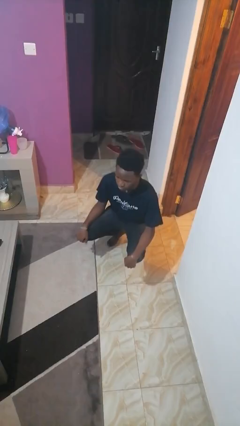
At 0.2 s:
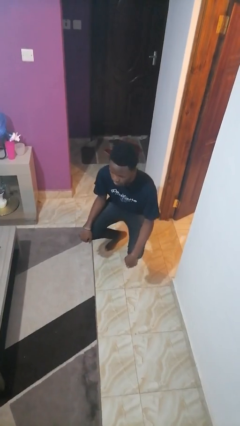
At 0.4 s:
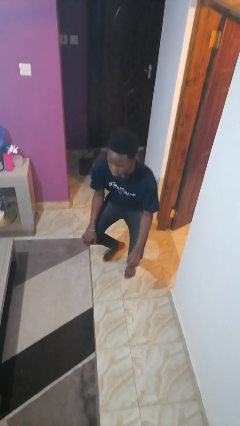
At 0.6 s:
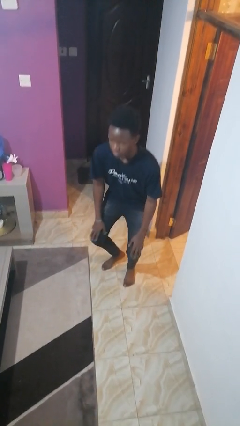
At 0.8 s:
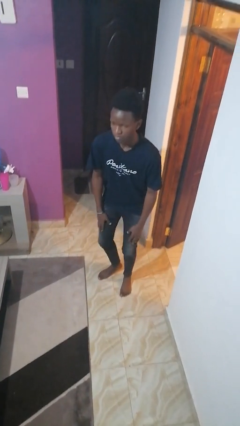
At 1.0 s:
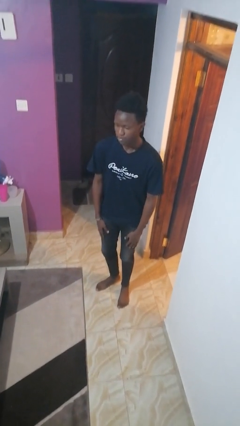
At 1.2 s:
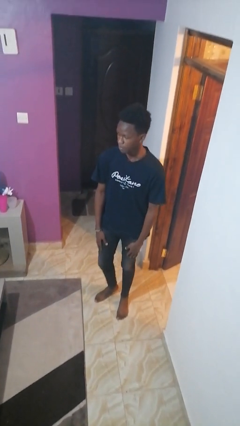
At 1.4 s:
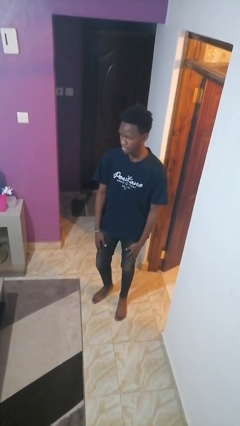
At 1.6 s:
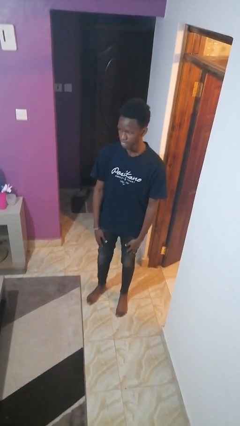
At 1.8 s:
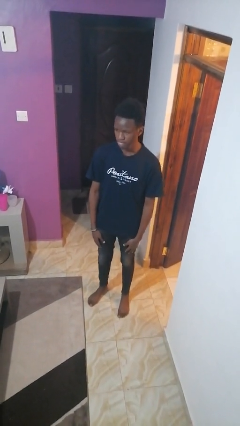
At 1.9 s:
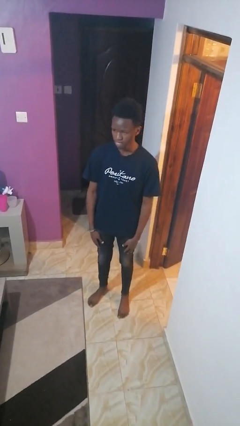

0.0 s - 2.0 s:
person stands up

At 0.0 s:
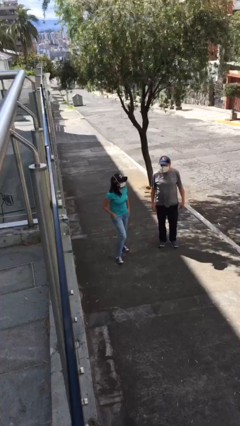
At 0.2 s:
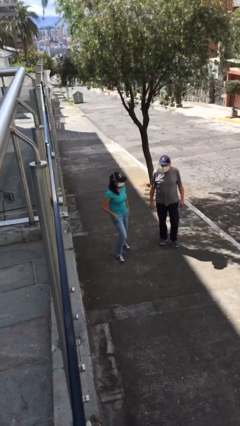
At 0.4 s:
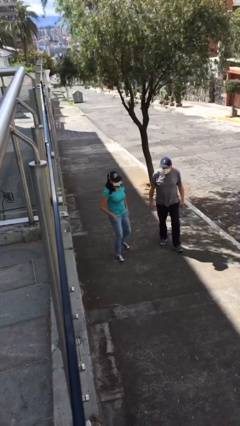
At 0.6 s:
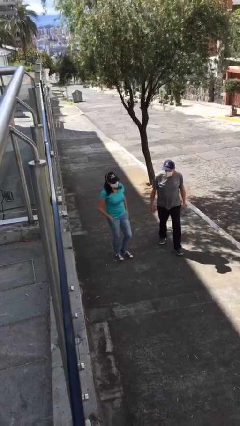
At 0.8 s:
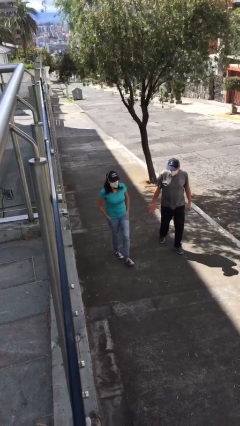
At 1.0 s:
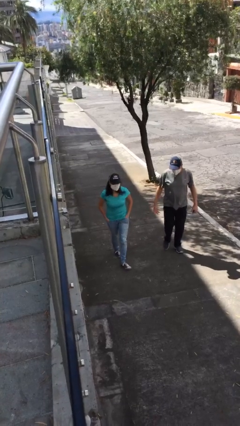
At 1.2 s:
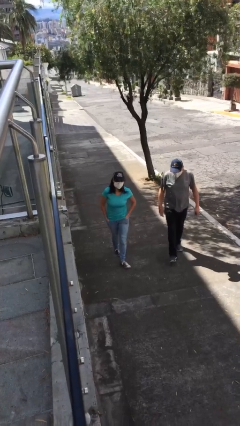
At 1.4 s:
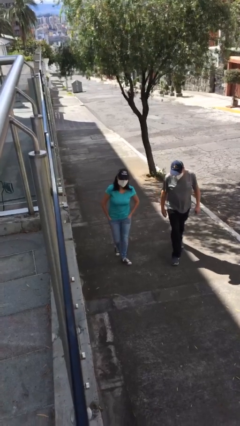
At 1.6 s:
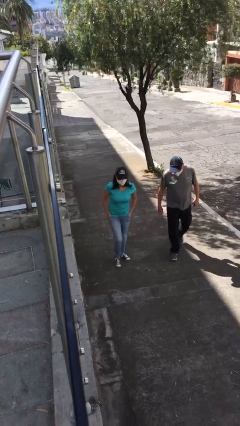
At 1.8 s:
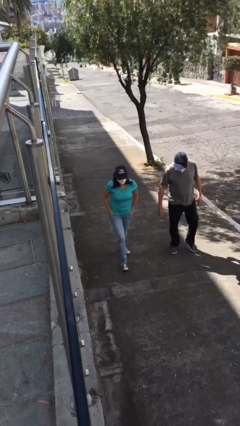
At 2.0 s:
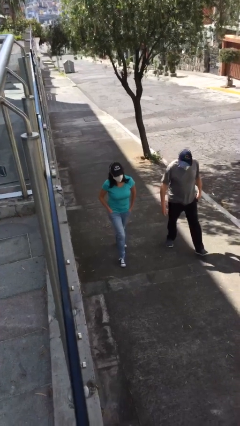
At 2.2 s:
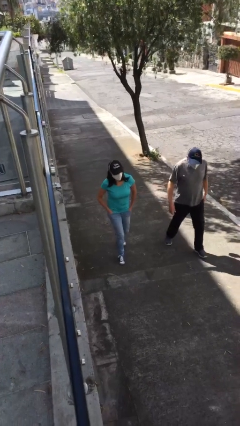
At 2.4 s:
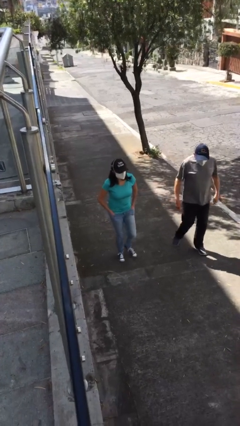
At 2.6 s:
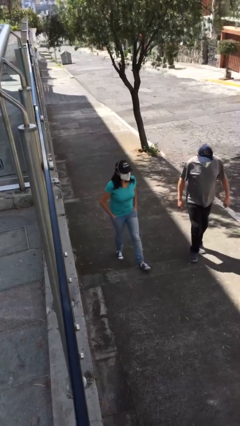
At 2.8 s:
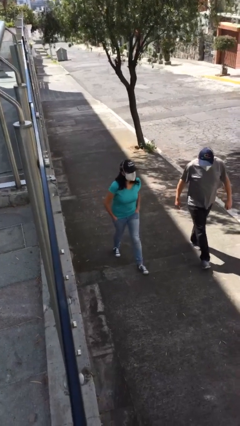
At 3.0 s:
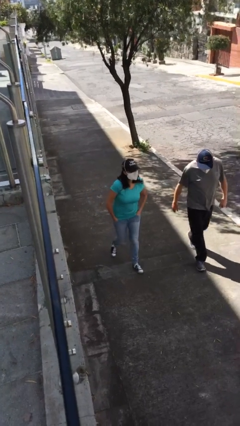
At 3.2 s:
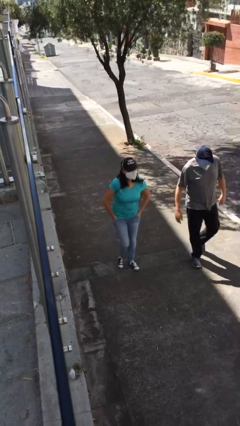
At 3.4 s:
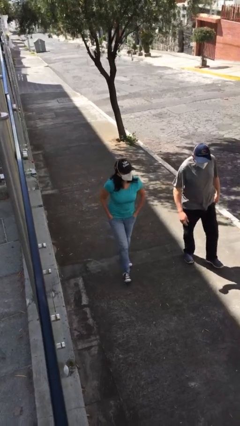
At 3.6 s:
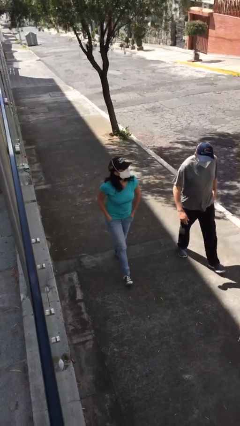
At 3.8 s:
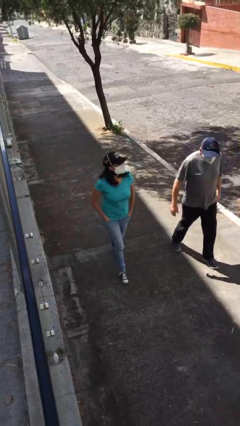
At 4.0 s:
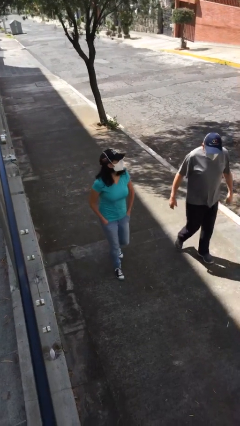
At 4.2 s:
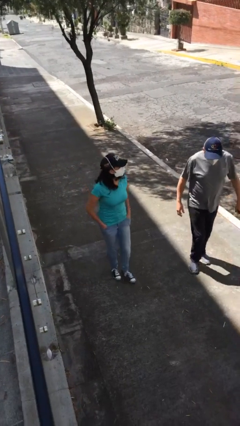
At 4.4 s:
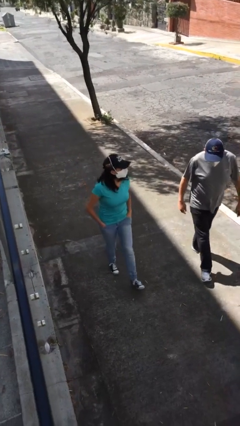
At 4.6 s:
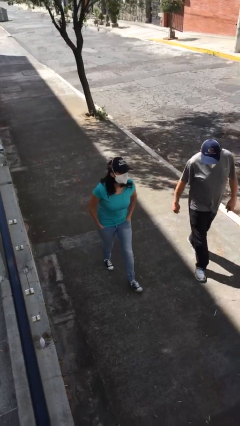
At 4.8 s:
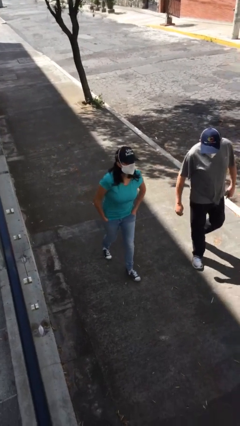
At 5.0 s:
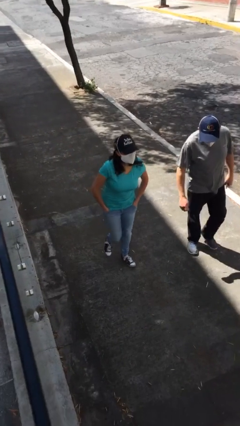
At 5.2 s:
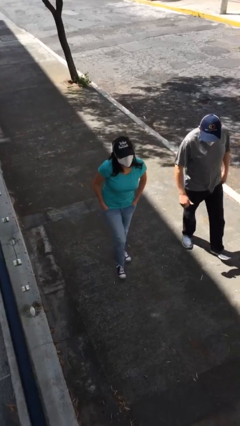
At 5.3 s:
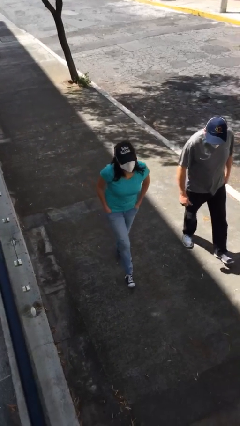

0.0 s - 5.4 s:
person talks to person

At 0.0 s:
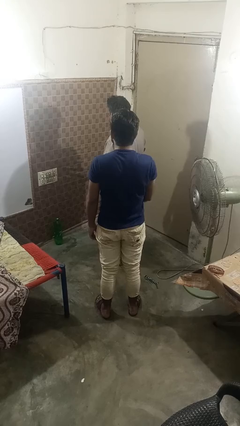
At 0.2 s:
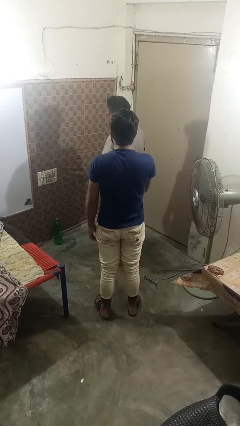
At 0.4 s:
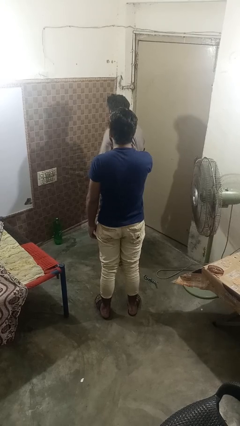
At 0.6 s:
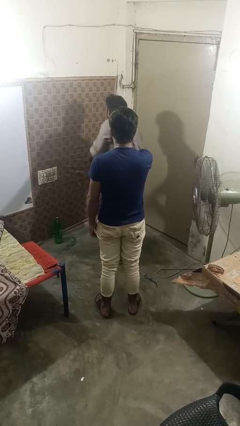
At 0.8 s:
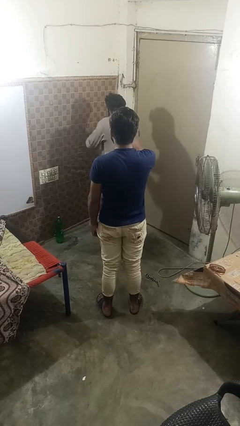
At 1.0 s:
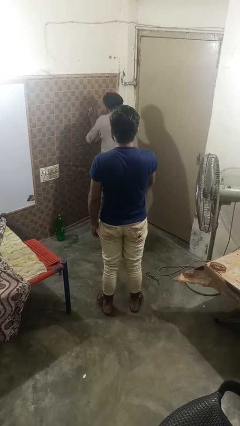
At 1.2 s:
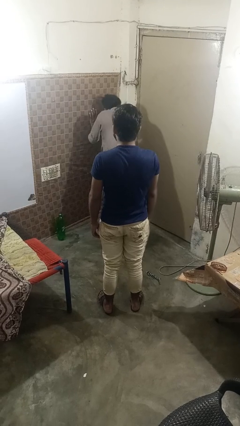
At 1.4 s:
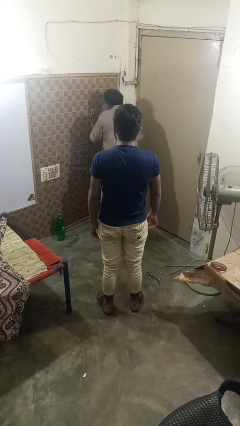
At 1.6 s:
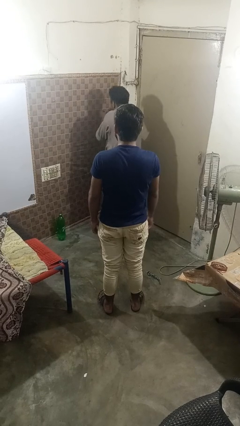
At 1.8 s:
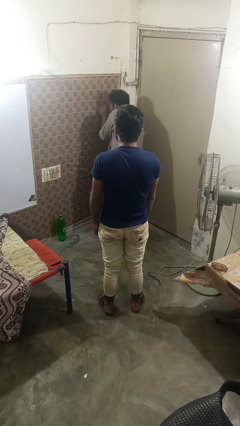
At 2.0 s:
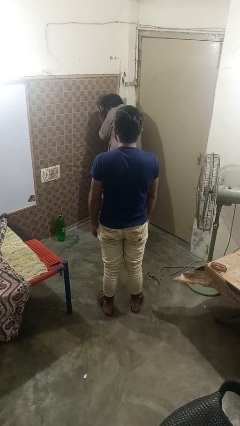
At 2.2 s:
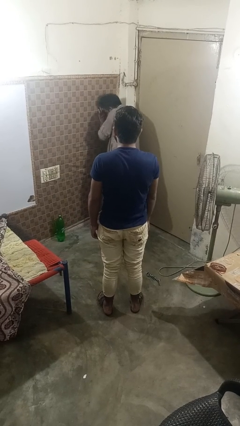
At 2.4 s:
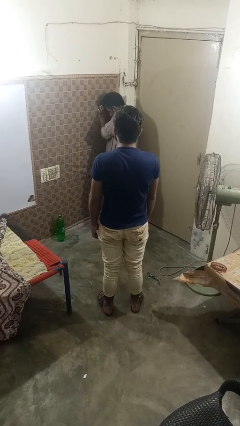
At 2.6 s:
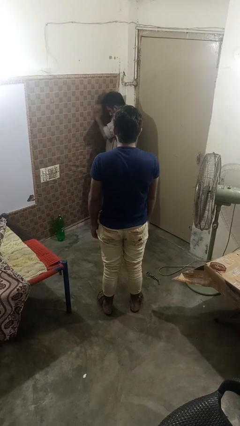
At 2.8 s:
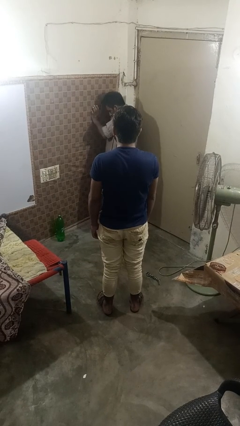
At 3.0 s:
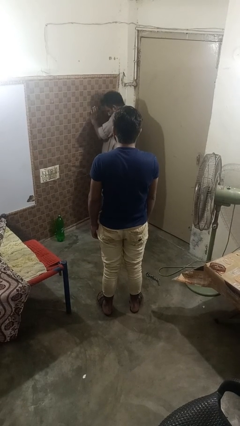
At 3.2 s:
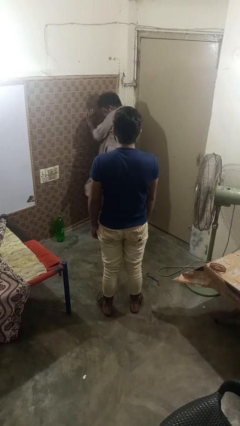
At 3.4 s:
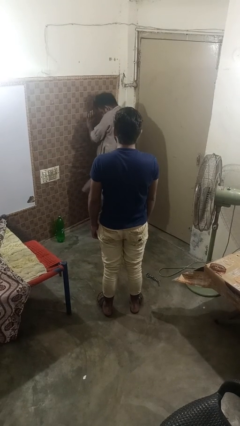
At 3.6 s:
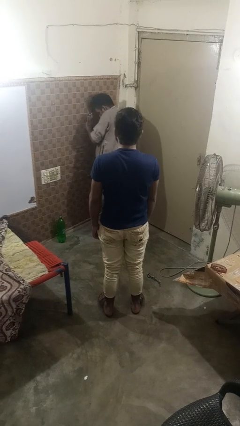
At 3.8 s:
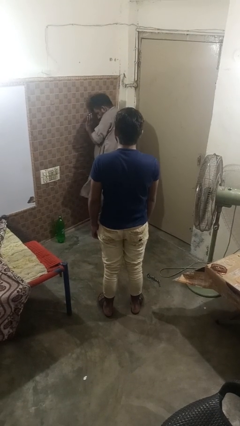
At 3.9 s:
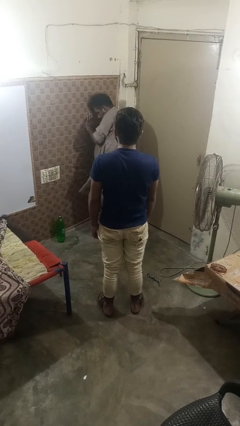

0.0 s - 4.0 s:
person shoves person

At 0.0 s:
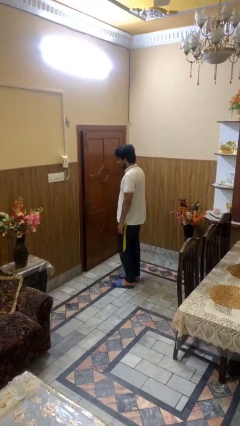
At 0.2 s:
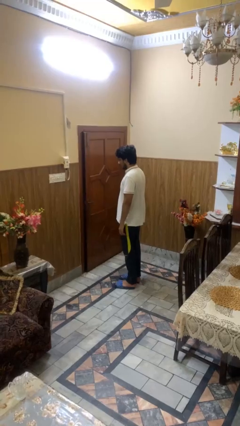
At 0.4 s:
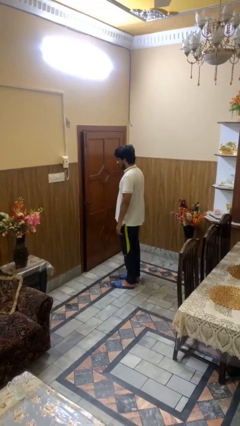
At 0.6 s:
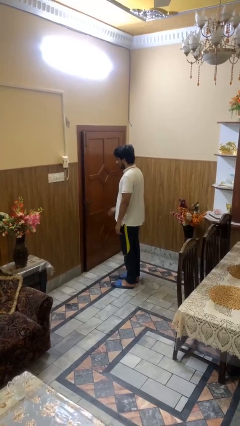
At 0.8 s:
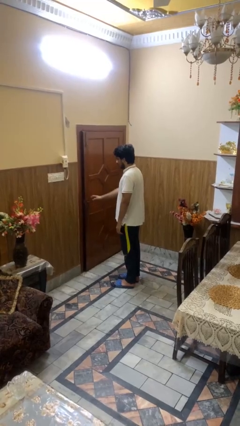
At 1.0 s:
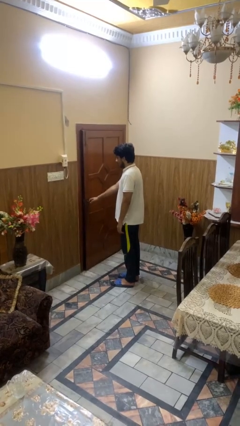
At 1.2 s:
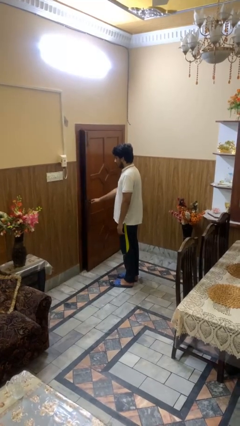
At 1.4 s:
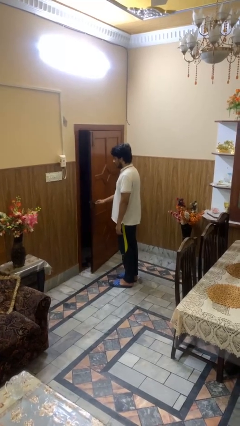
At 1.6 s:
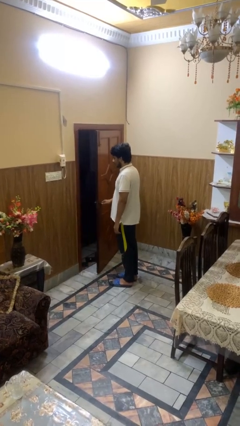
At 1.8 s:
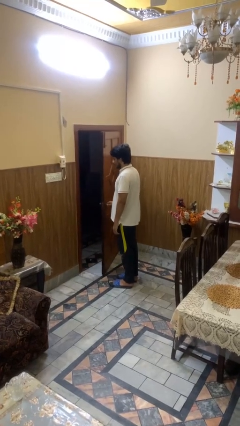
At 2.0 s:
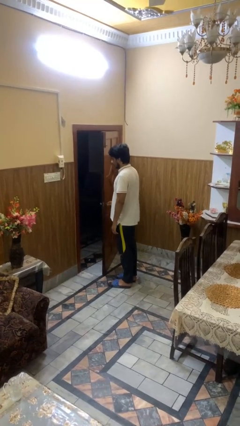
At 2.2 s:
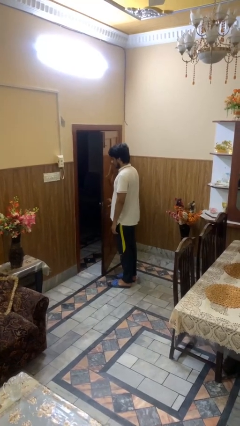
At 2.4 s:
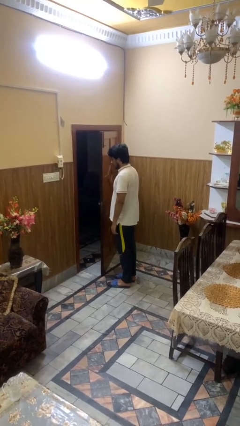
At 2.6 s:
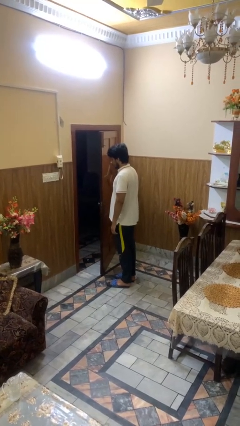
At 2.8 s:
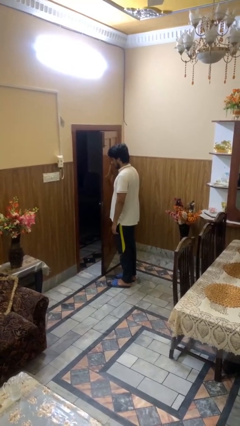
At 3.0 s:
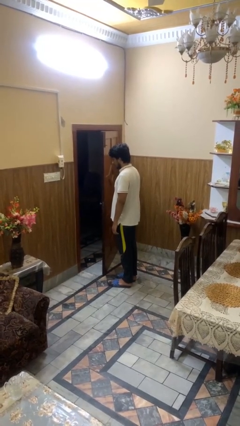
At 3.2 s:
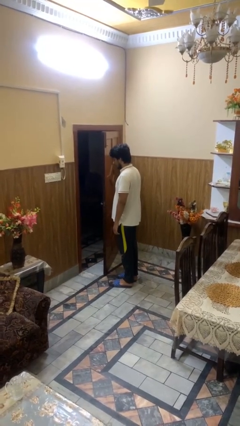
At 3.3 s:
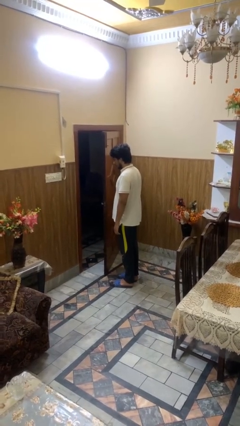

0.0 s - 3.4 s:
person opens facility door

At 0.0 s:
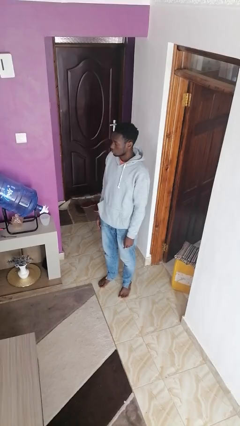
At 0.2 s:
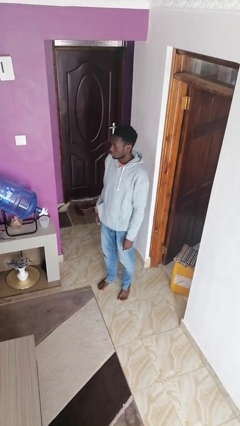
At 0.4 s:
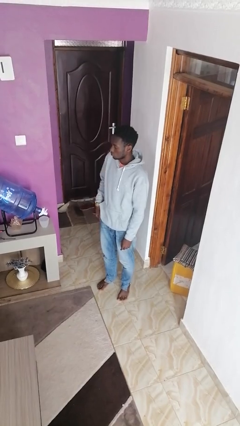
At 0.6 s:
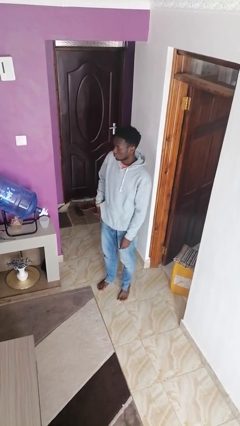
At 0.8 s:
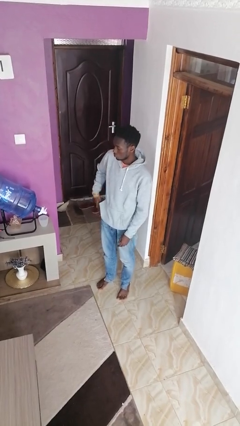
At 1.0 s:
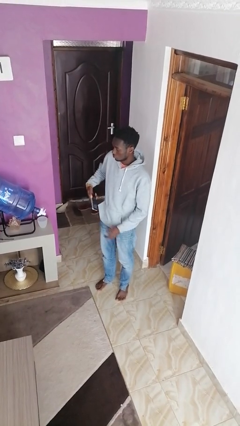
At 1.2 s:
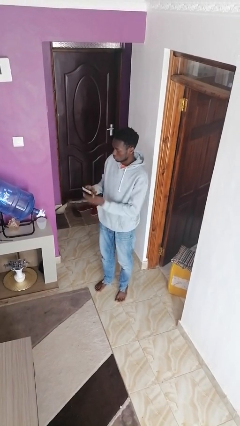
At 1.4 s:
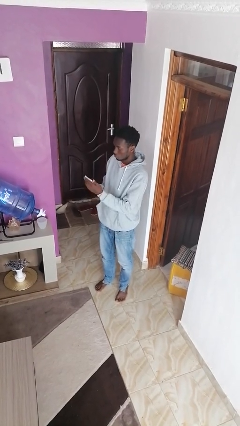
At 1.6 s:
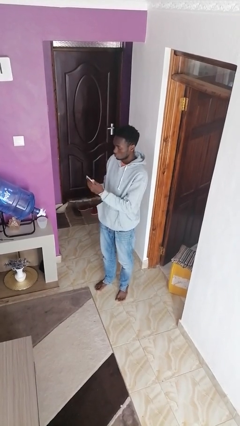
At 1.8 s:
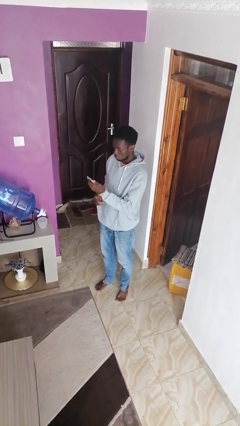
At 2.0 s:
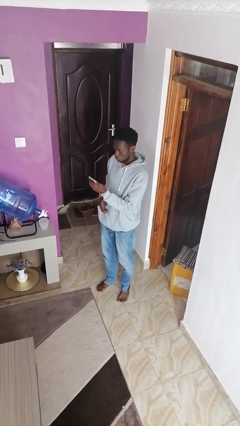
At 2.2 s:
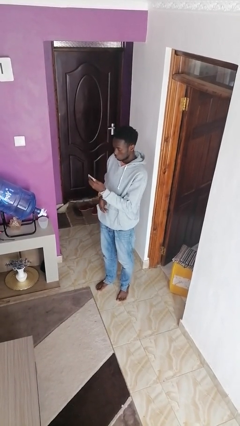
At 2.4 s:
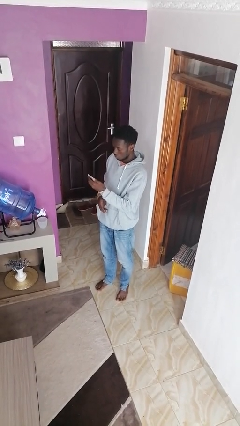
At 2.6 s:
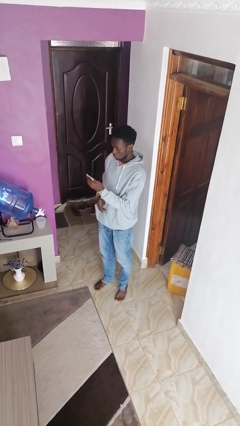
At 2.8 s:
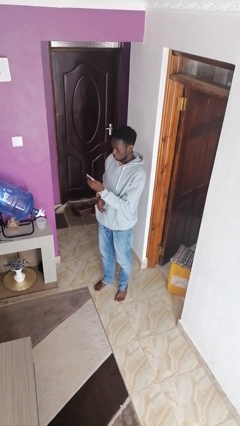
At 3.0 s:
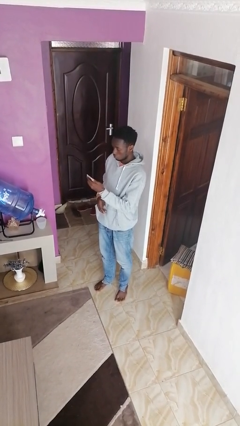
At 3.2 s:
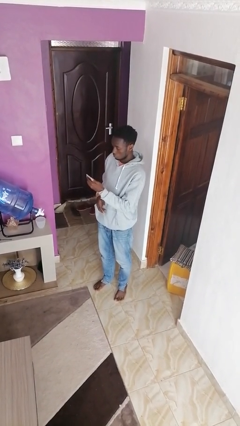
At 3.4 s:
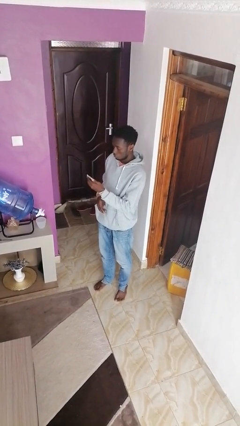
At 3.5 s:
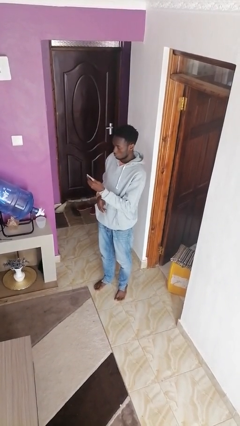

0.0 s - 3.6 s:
person takes phone from pocket
